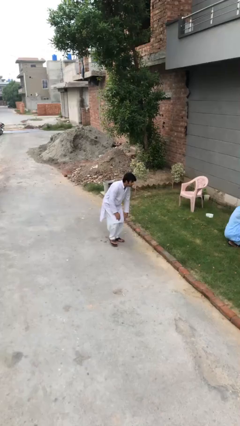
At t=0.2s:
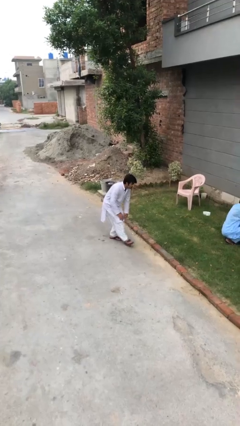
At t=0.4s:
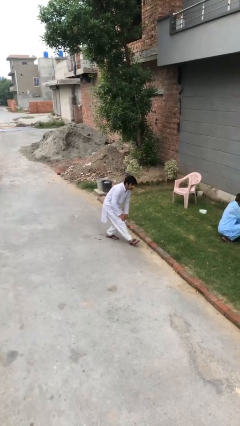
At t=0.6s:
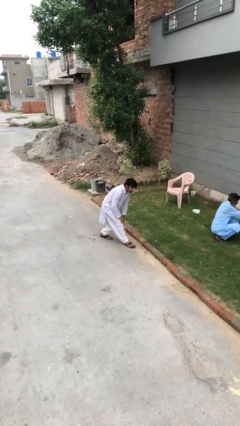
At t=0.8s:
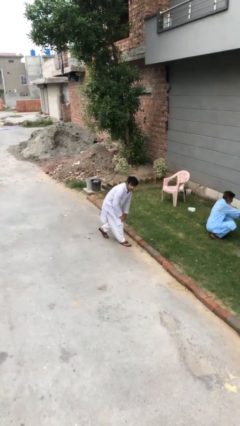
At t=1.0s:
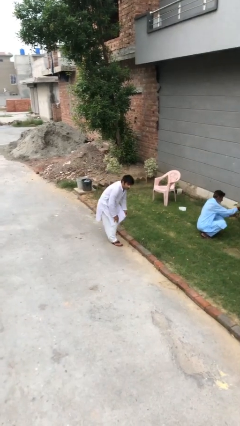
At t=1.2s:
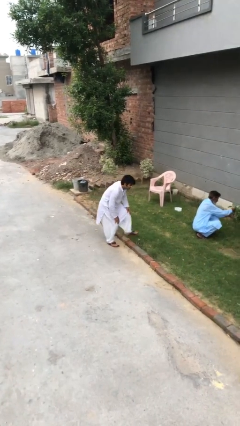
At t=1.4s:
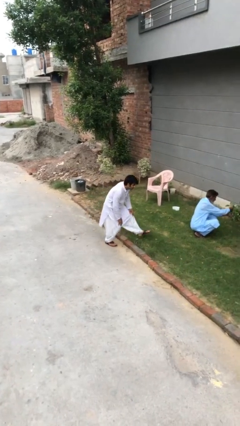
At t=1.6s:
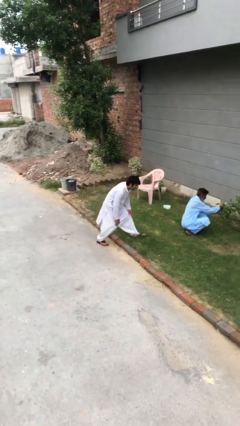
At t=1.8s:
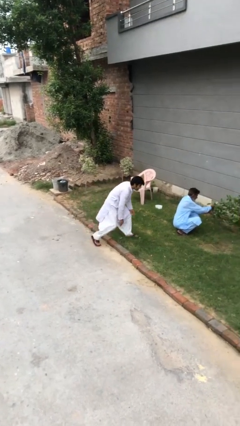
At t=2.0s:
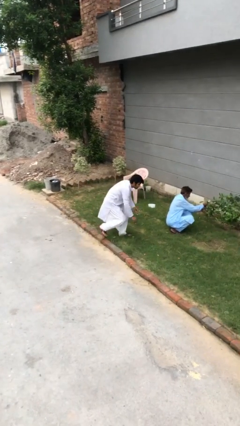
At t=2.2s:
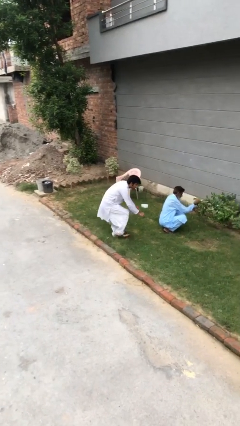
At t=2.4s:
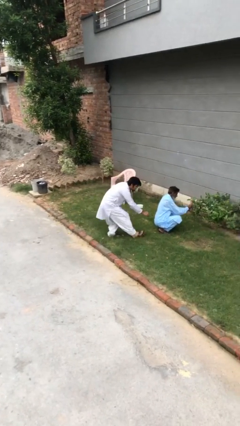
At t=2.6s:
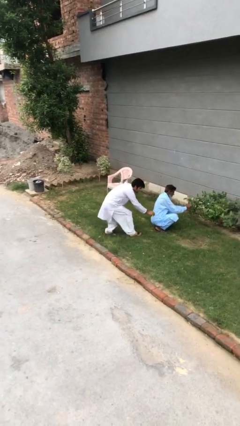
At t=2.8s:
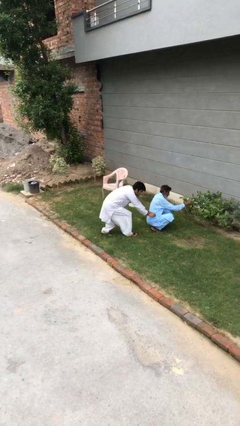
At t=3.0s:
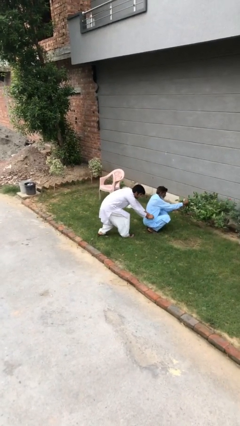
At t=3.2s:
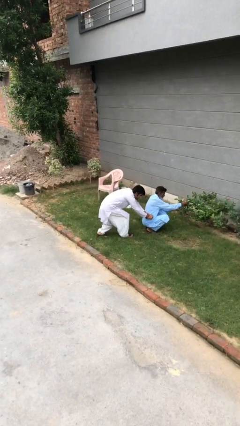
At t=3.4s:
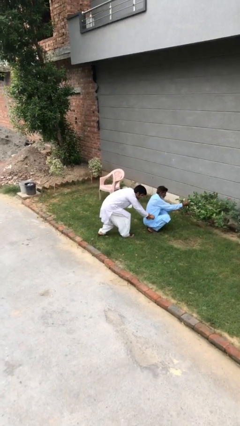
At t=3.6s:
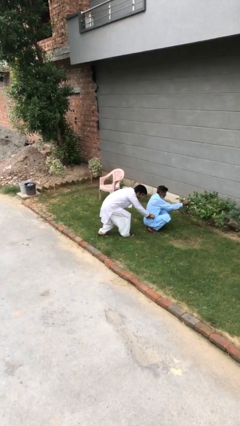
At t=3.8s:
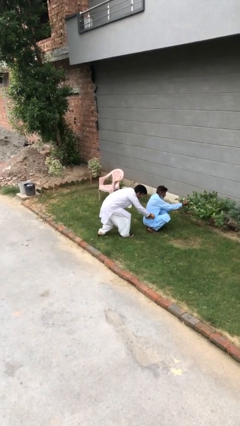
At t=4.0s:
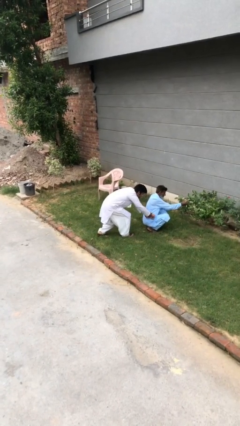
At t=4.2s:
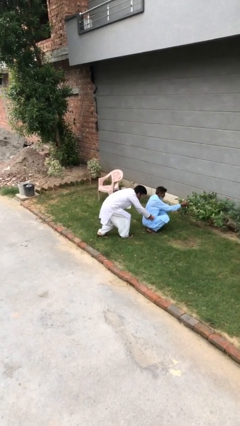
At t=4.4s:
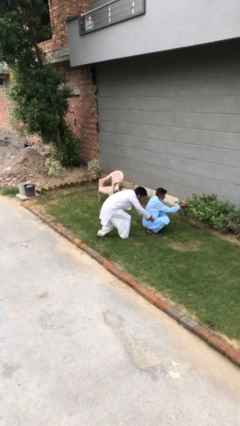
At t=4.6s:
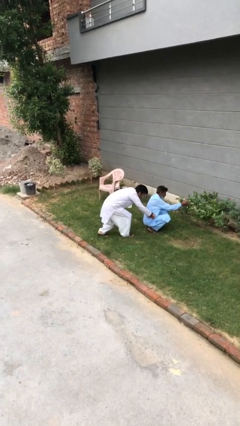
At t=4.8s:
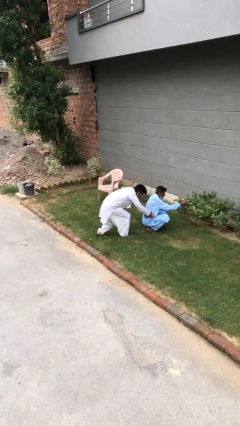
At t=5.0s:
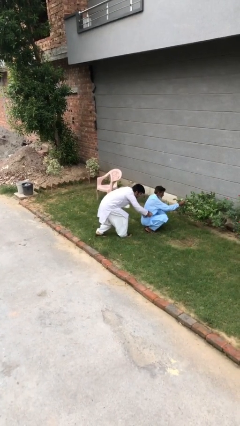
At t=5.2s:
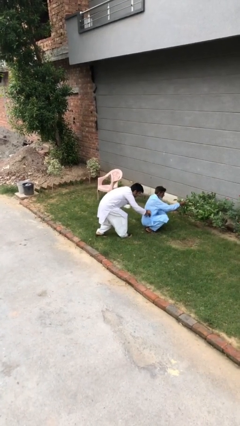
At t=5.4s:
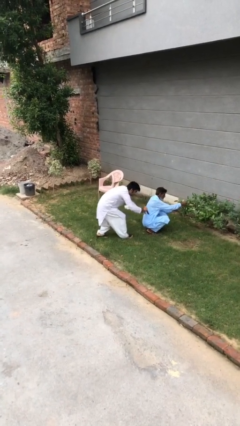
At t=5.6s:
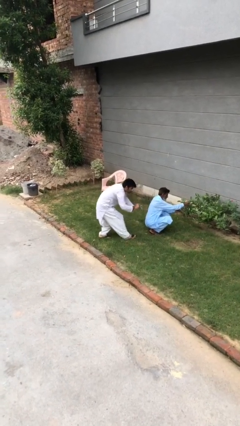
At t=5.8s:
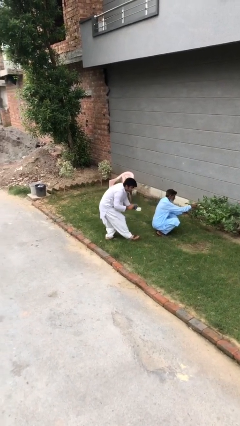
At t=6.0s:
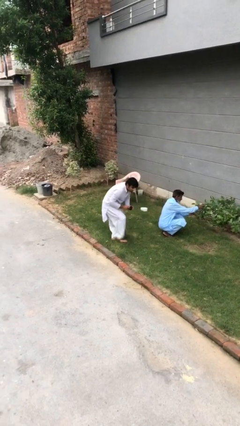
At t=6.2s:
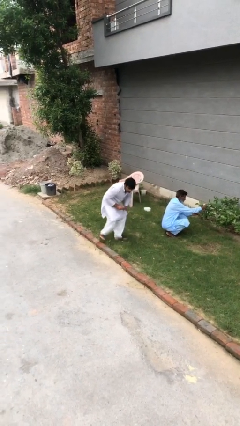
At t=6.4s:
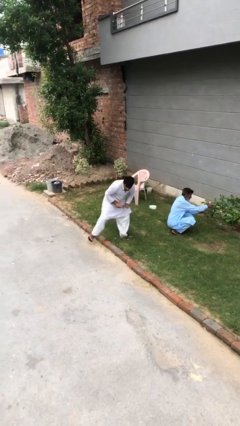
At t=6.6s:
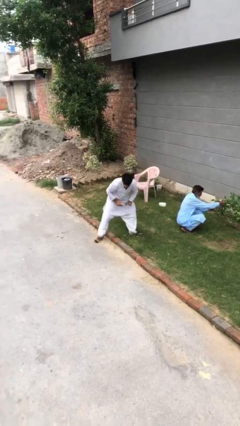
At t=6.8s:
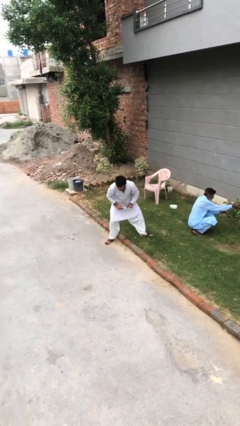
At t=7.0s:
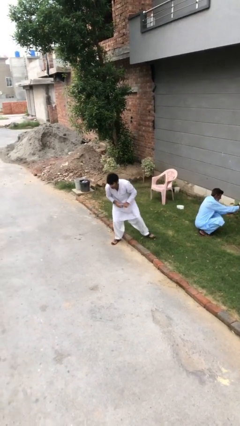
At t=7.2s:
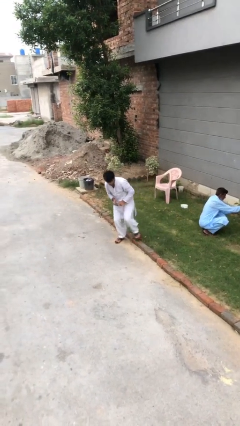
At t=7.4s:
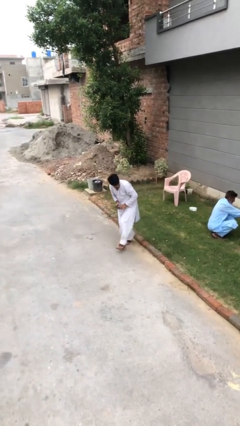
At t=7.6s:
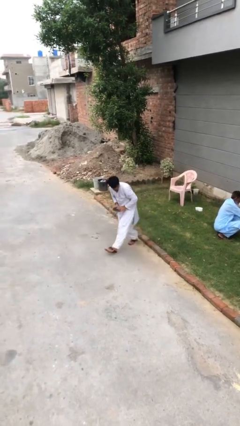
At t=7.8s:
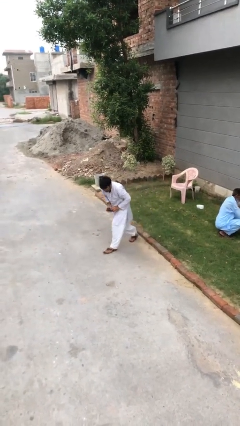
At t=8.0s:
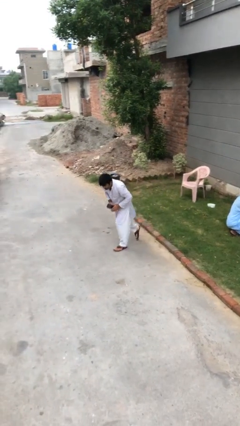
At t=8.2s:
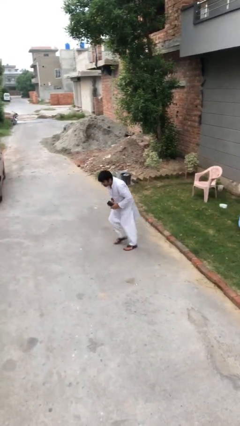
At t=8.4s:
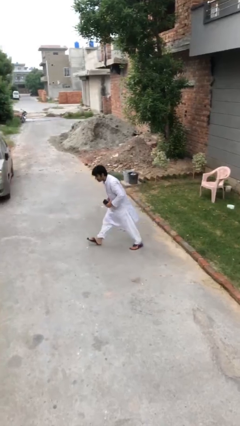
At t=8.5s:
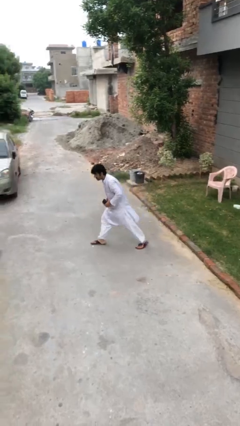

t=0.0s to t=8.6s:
person steals object from person

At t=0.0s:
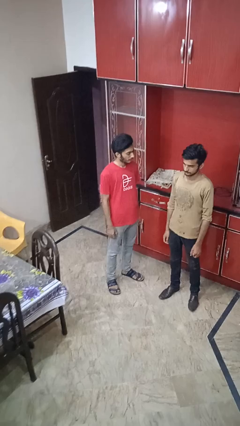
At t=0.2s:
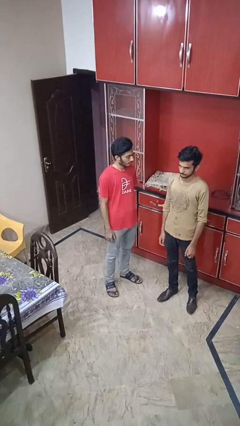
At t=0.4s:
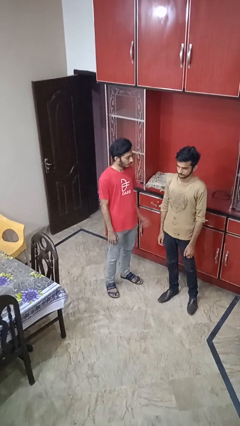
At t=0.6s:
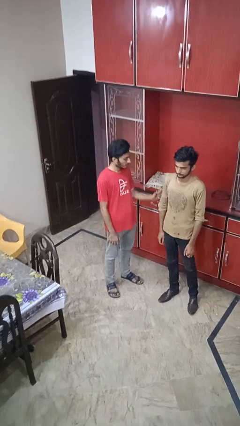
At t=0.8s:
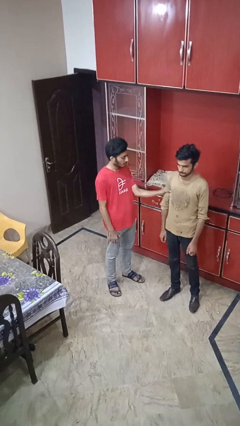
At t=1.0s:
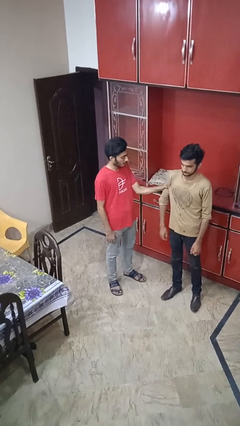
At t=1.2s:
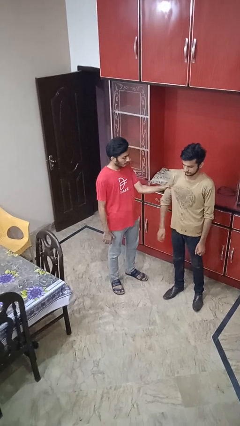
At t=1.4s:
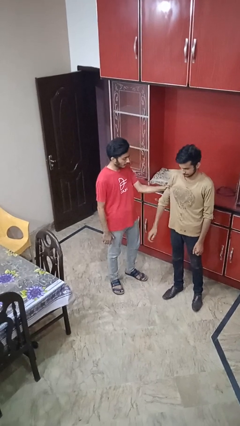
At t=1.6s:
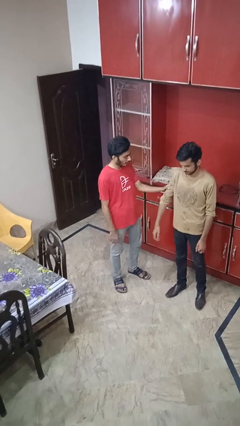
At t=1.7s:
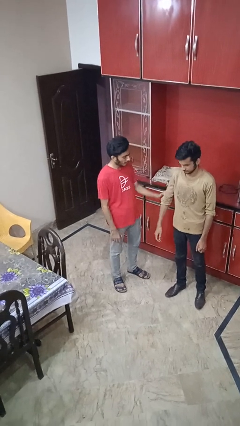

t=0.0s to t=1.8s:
person grabs person by bicep

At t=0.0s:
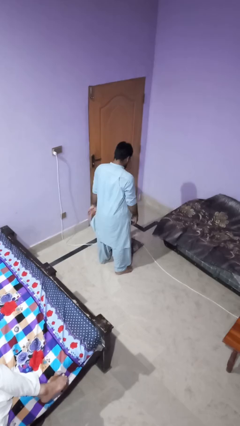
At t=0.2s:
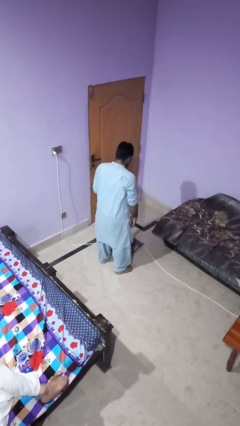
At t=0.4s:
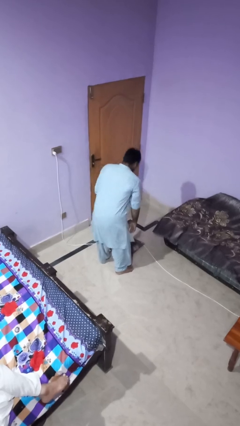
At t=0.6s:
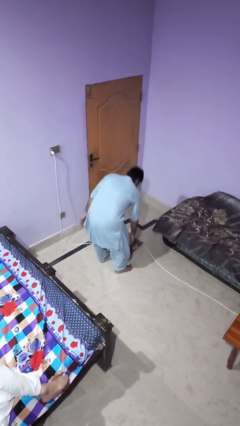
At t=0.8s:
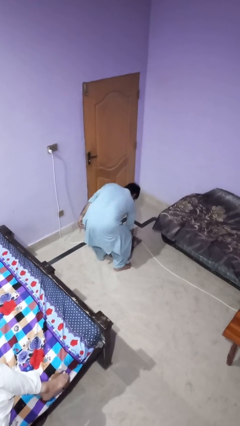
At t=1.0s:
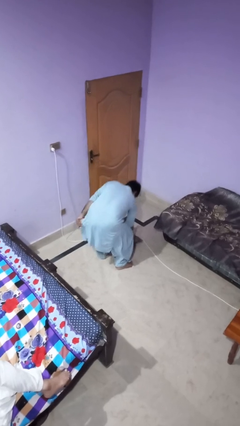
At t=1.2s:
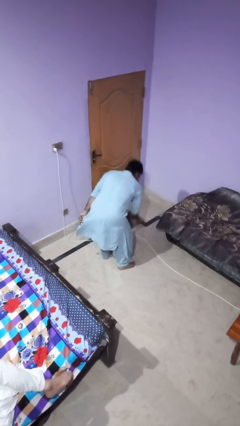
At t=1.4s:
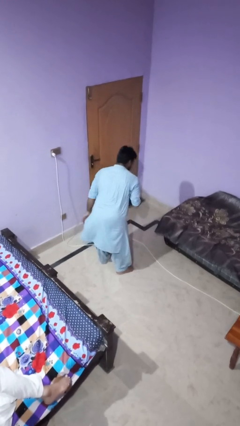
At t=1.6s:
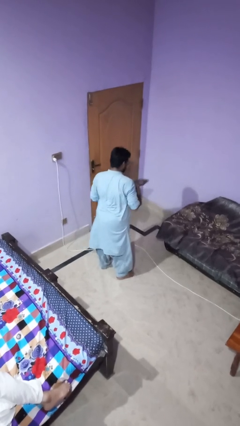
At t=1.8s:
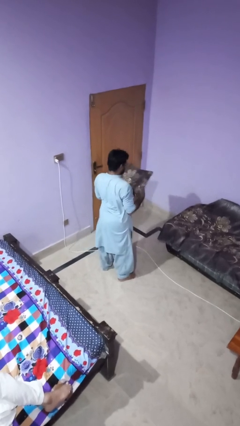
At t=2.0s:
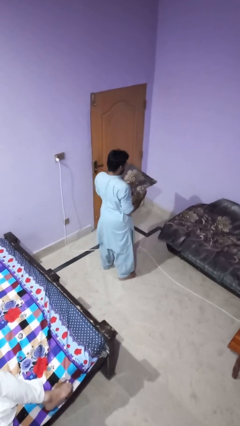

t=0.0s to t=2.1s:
person picks up object from floor

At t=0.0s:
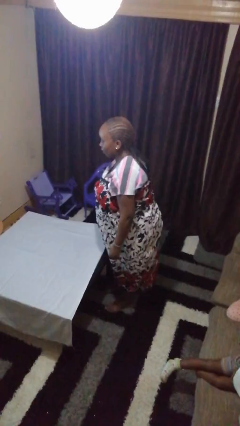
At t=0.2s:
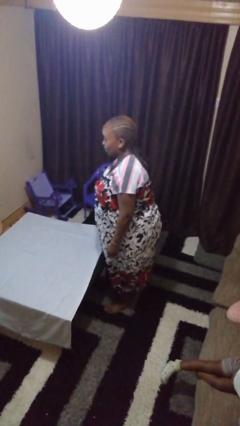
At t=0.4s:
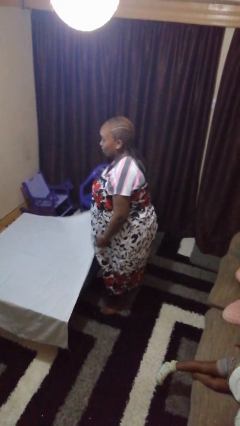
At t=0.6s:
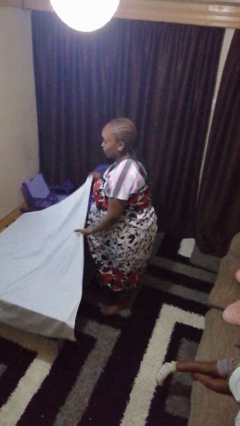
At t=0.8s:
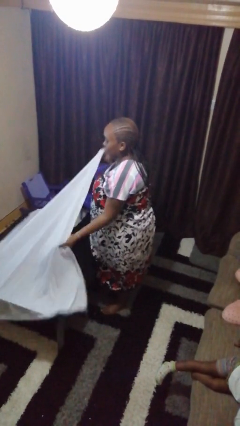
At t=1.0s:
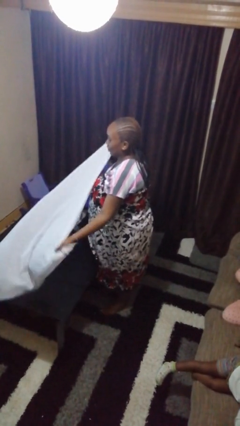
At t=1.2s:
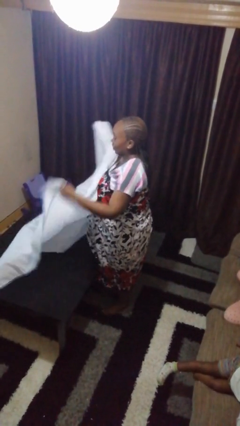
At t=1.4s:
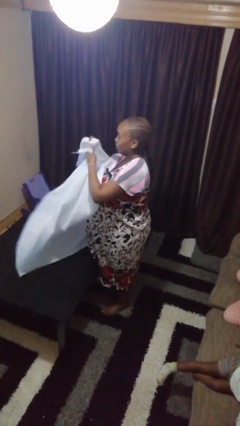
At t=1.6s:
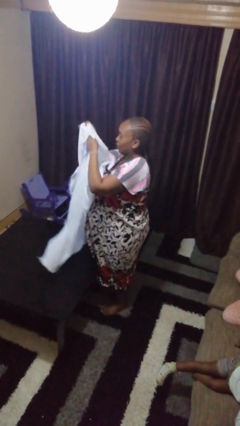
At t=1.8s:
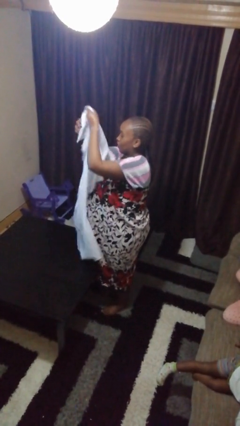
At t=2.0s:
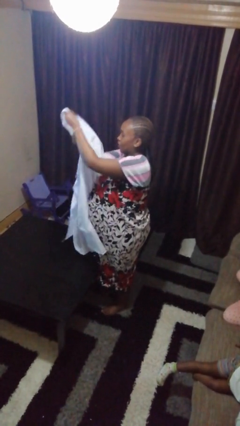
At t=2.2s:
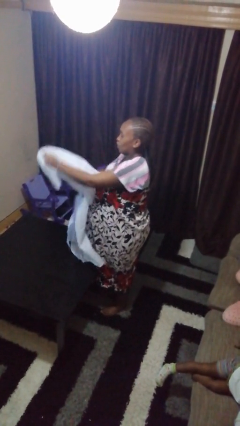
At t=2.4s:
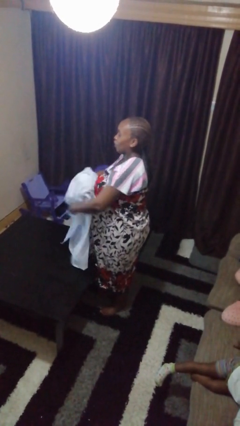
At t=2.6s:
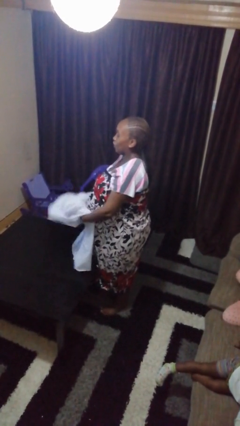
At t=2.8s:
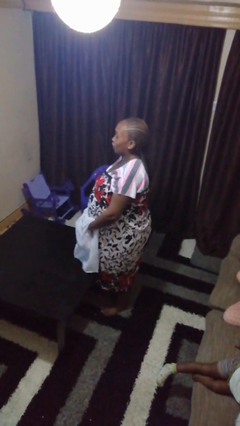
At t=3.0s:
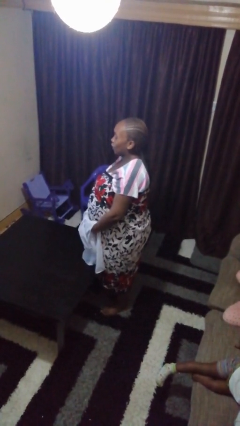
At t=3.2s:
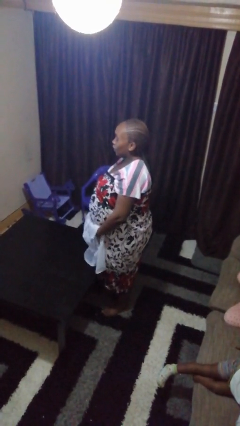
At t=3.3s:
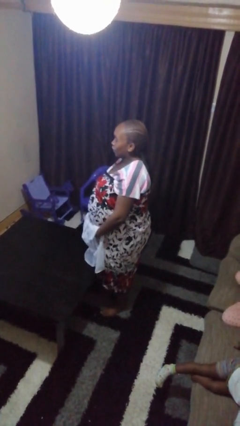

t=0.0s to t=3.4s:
person folds tablecloth

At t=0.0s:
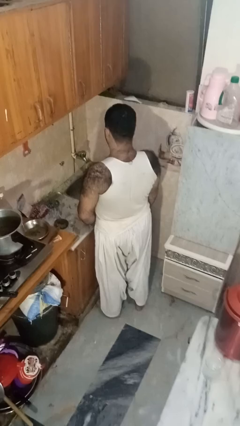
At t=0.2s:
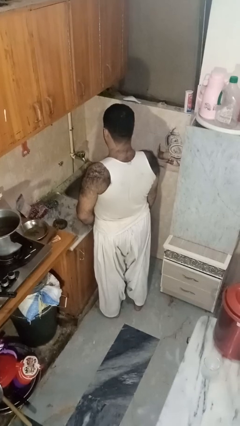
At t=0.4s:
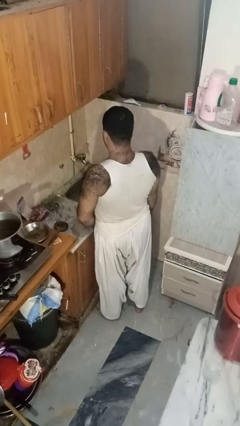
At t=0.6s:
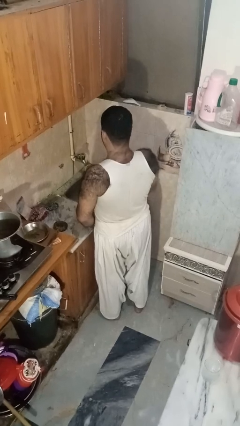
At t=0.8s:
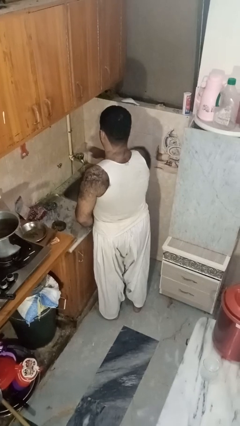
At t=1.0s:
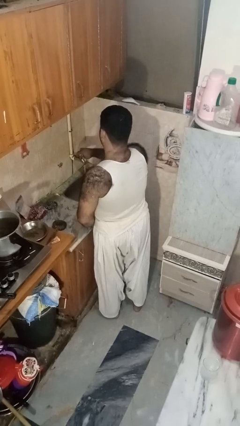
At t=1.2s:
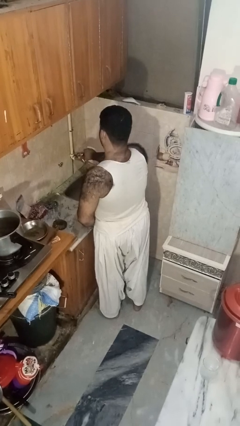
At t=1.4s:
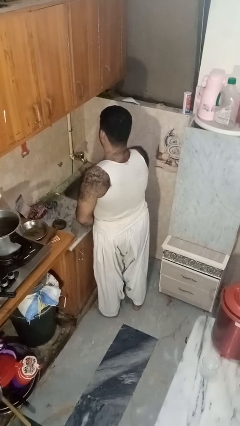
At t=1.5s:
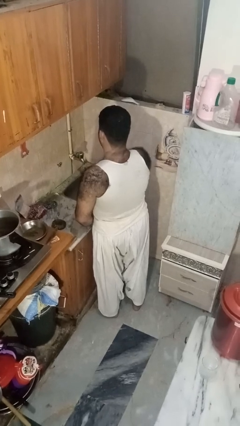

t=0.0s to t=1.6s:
person turns off faucet
